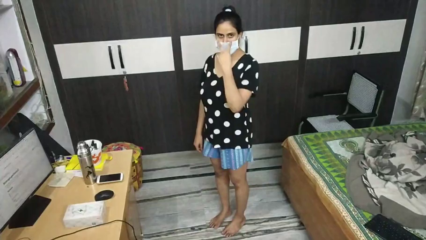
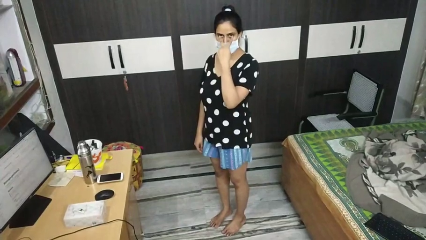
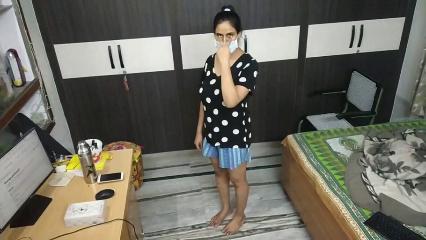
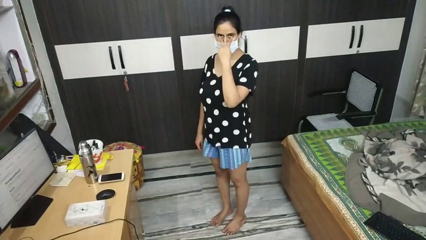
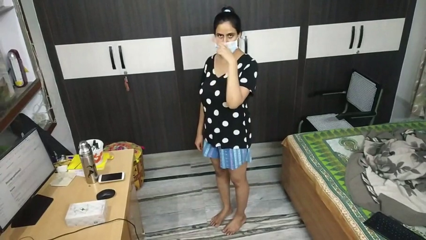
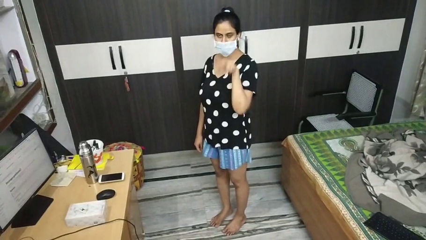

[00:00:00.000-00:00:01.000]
person gestures watch closely

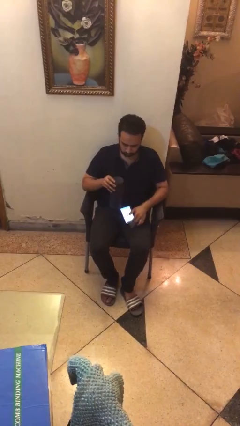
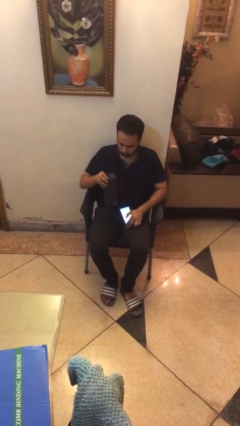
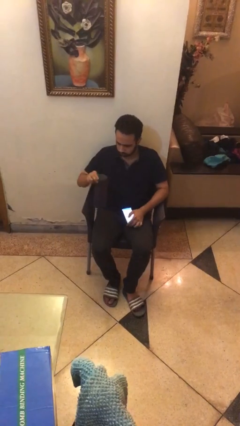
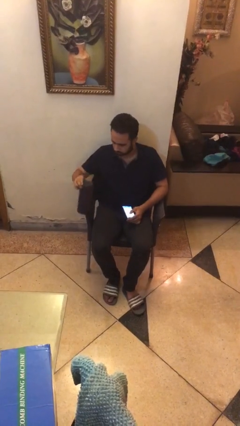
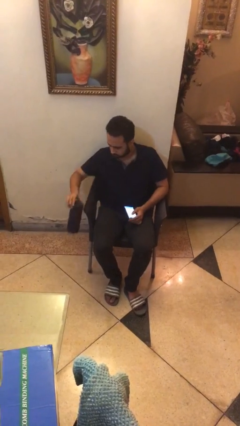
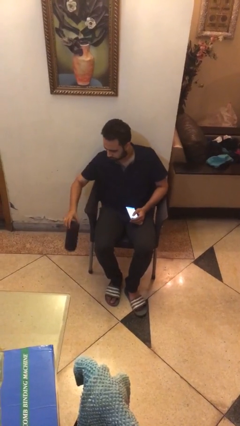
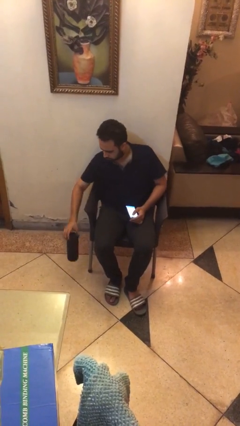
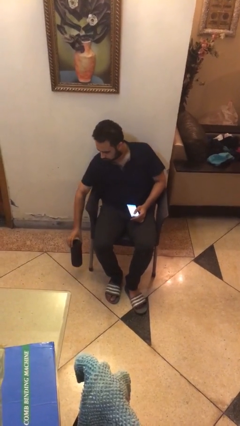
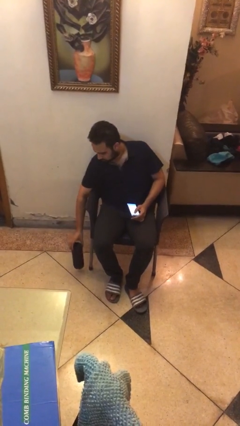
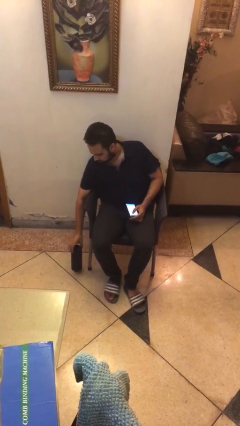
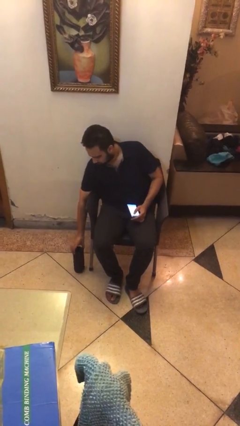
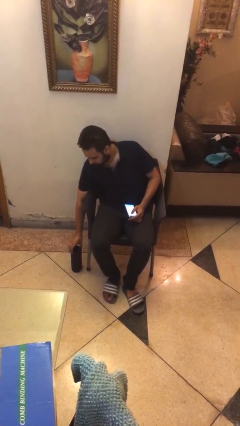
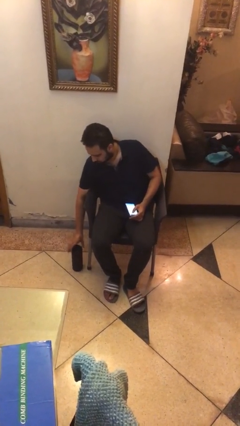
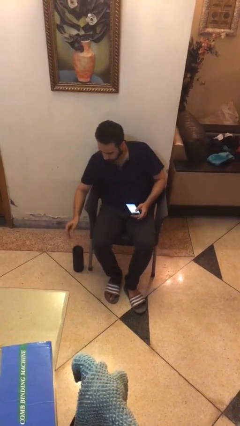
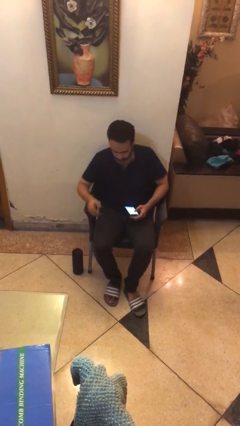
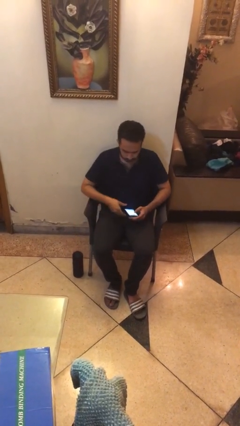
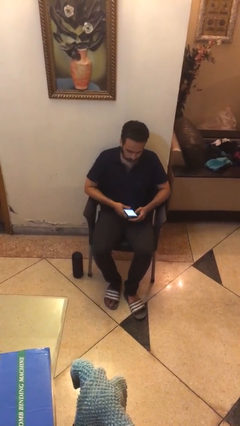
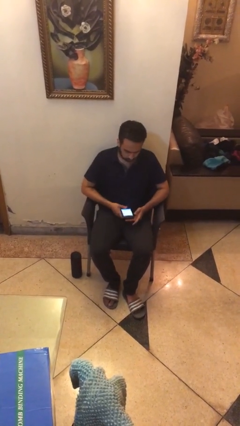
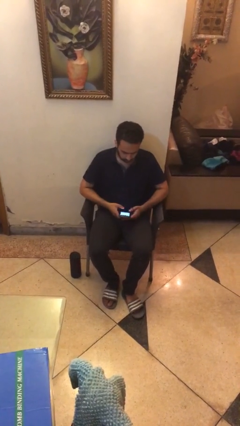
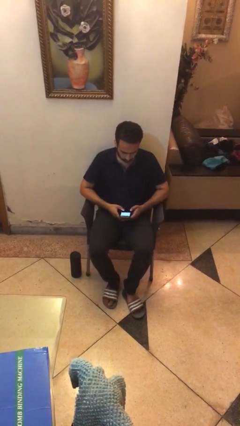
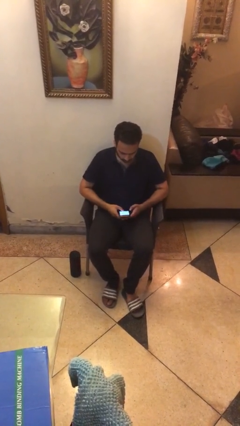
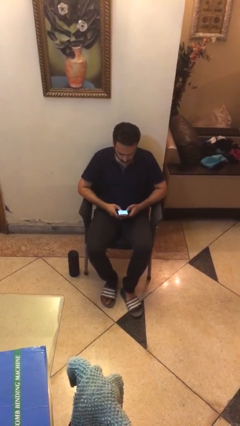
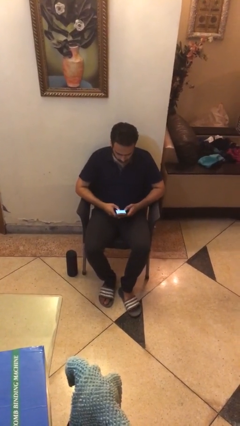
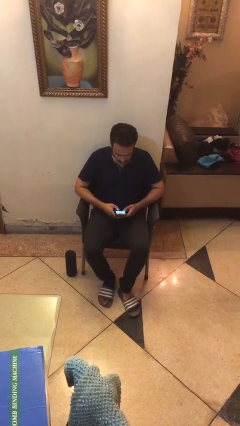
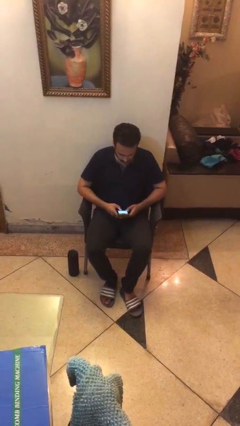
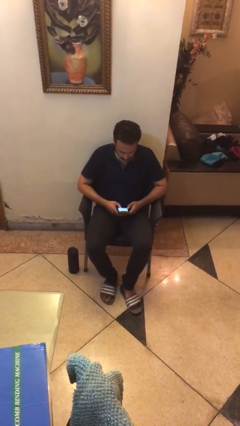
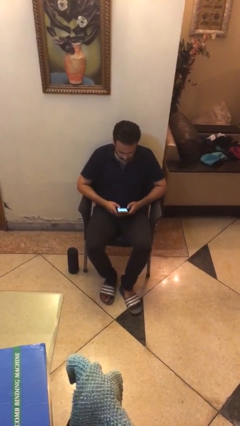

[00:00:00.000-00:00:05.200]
person puts down object on floor

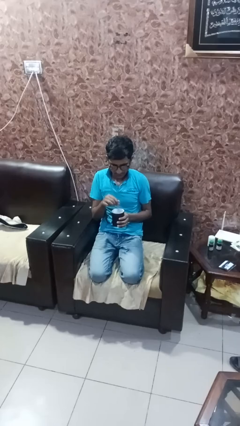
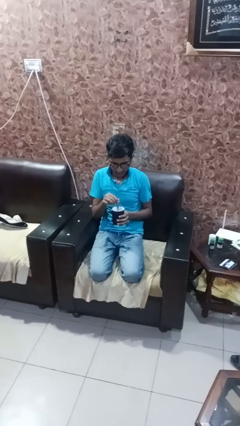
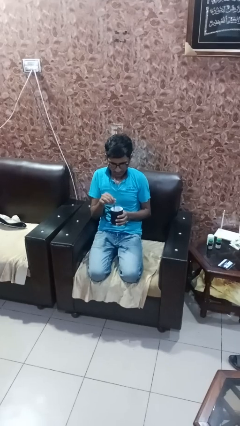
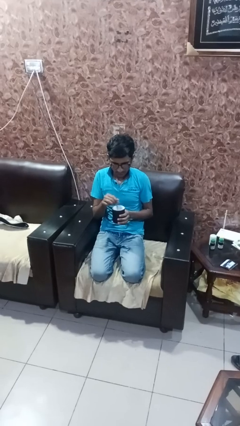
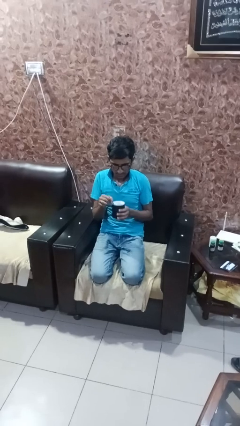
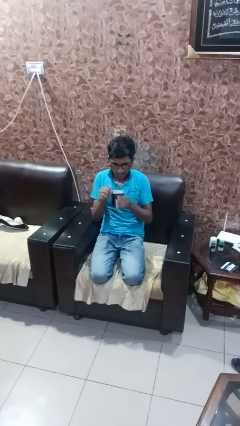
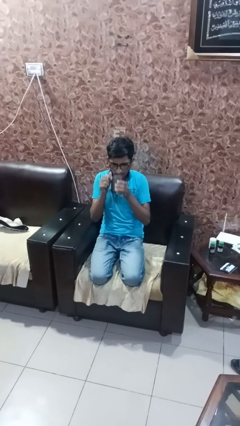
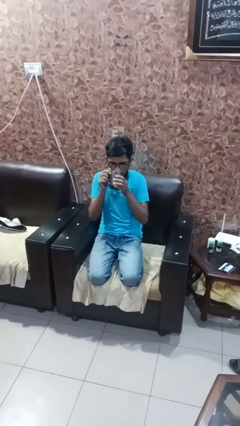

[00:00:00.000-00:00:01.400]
person stirs mug

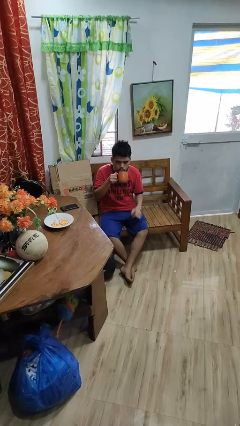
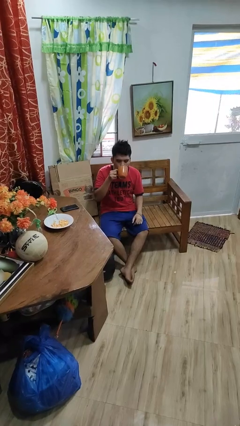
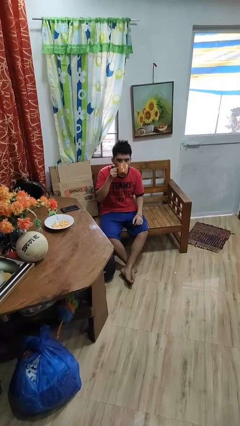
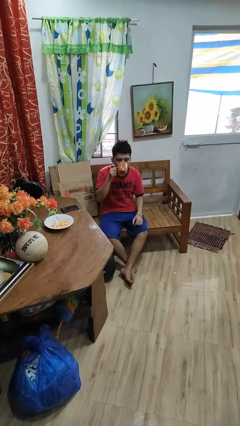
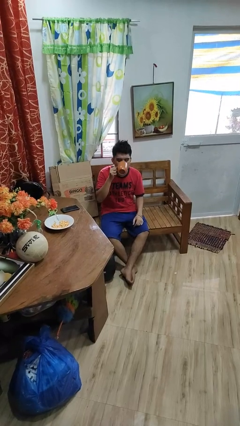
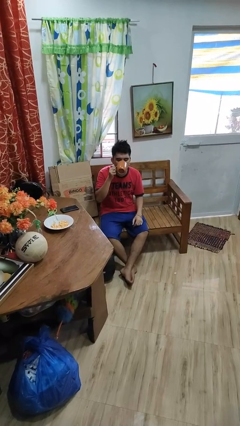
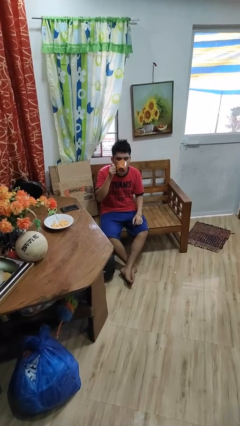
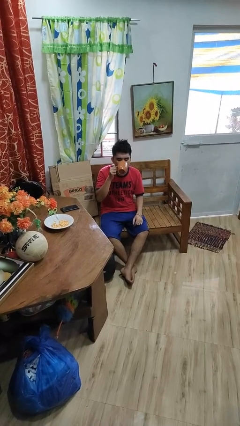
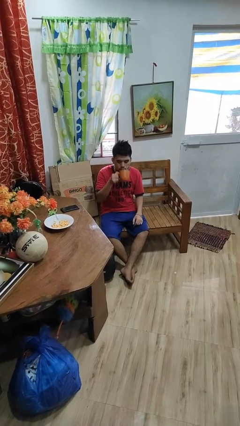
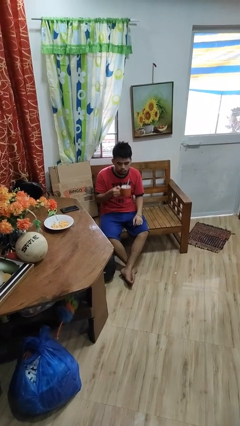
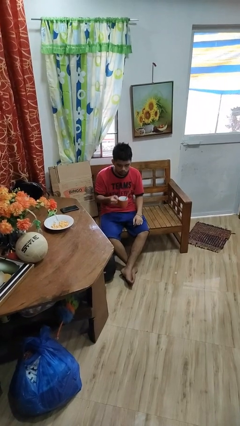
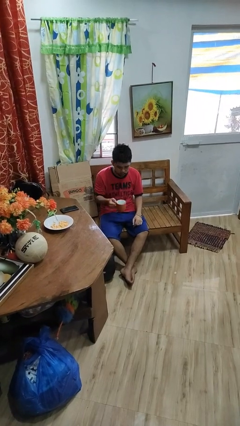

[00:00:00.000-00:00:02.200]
person drinks from mug

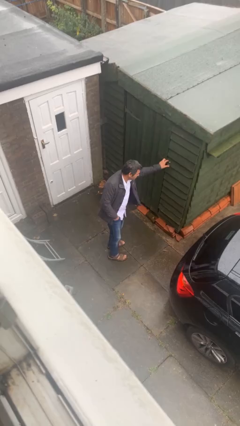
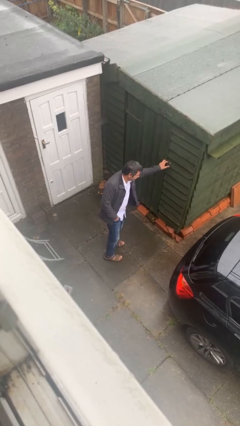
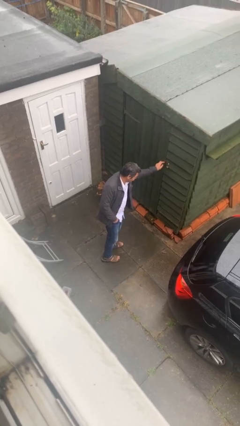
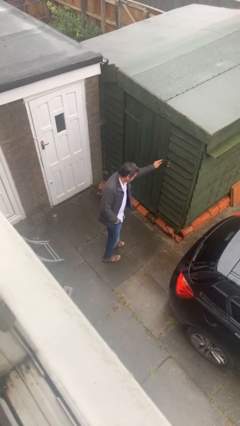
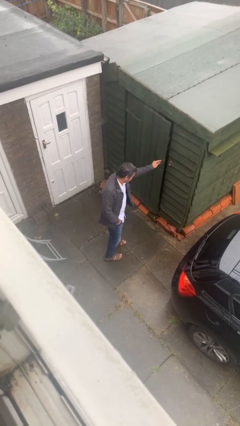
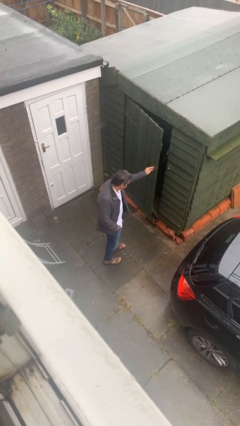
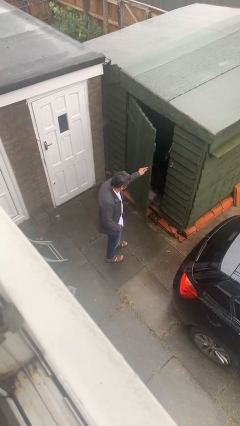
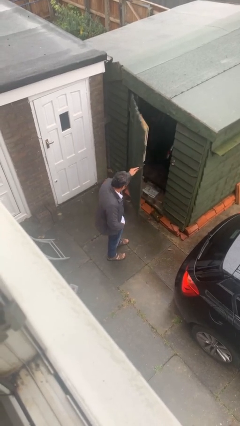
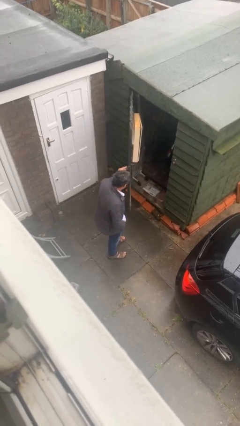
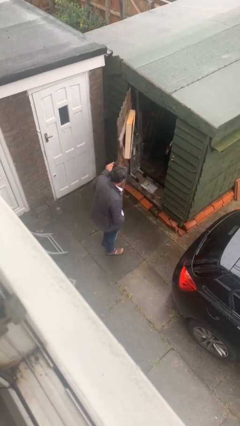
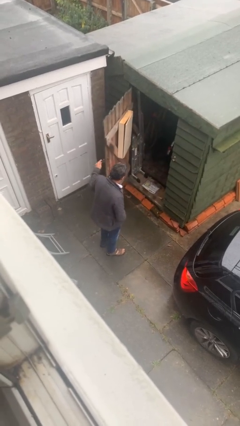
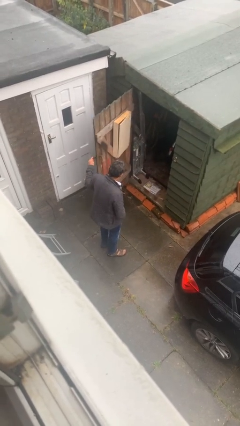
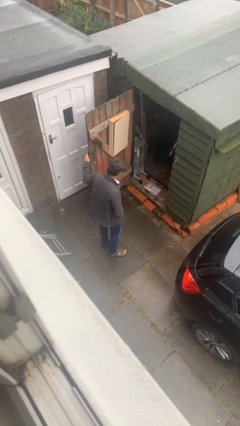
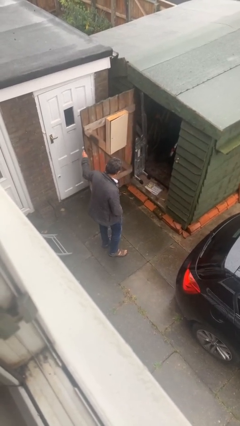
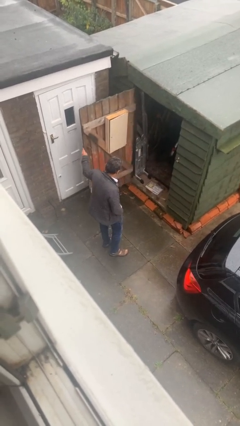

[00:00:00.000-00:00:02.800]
person opens facility door

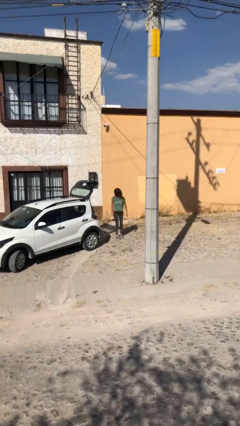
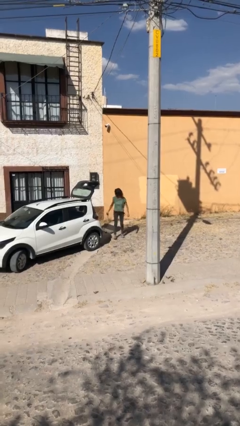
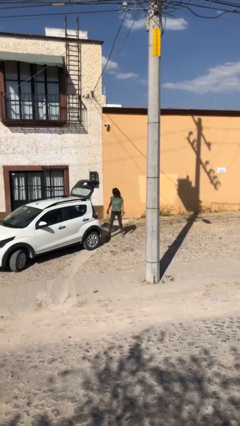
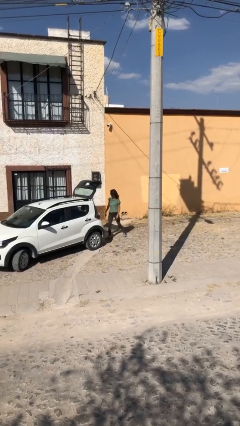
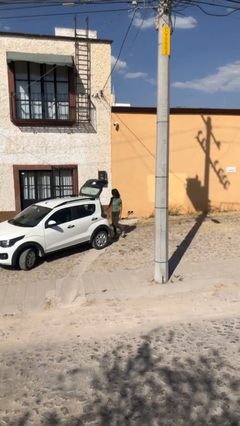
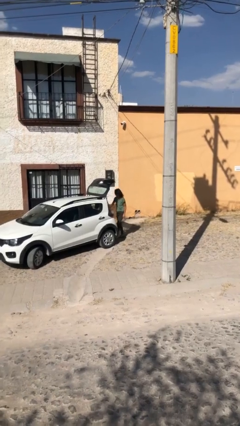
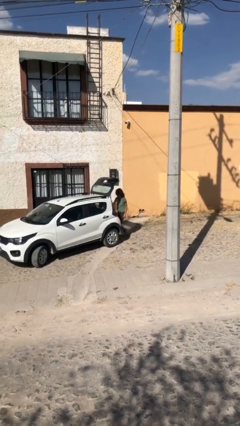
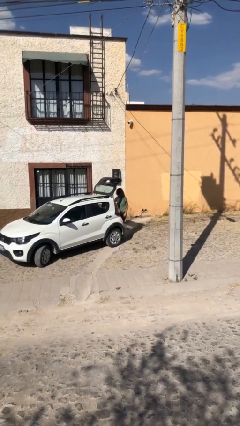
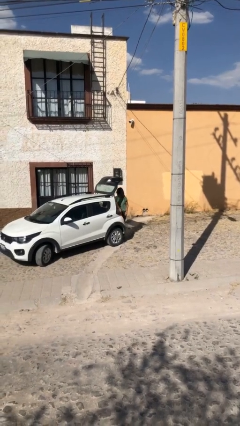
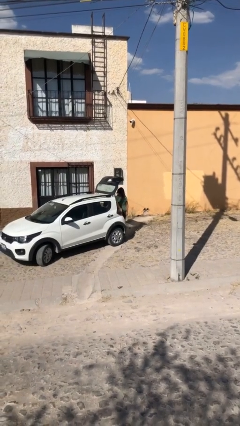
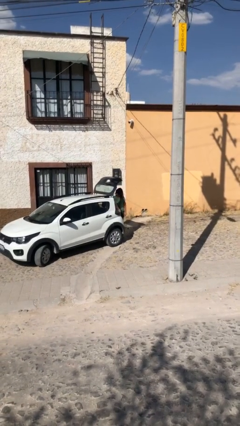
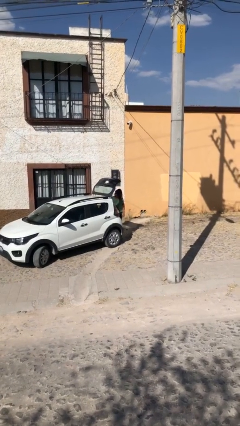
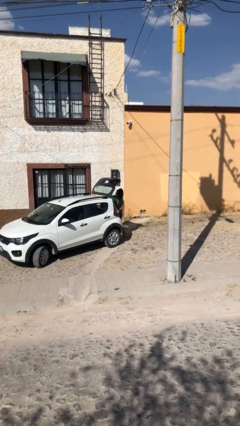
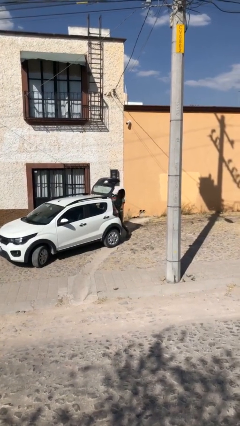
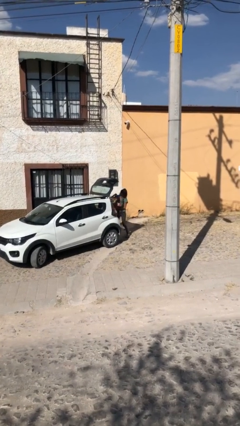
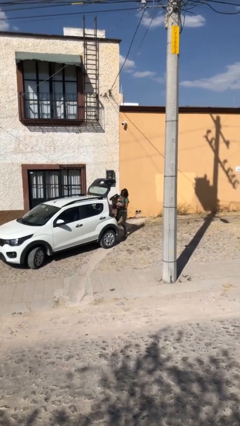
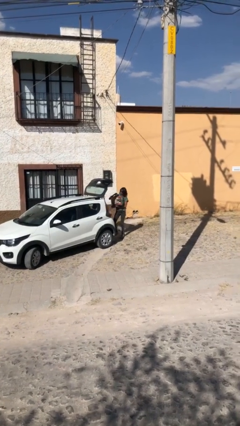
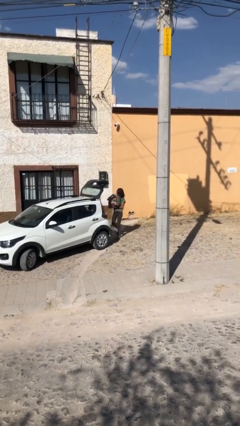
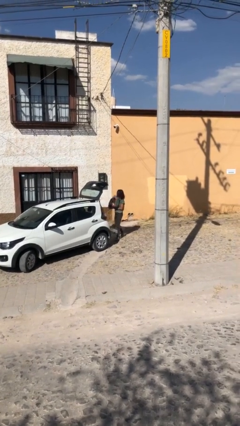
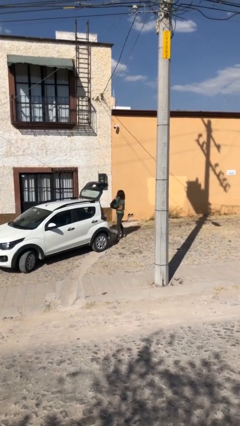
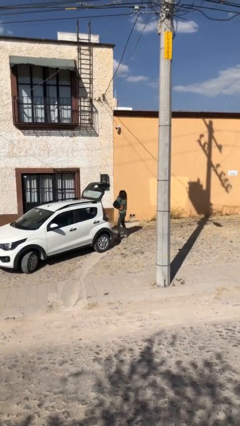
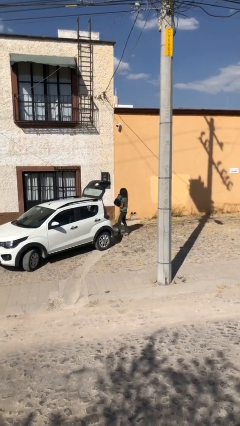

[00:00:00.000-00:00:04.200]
person unloads car

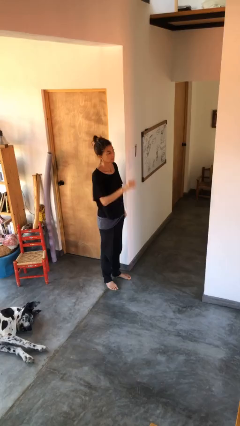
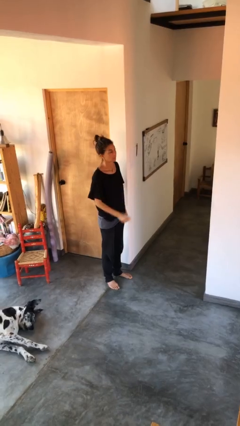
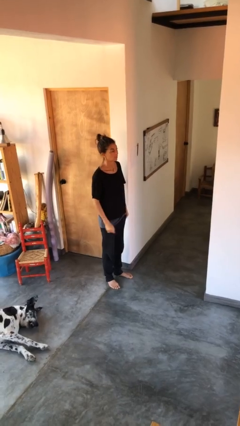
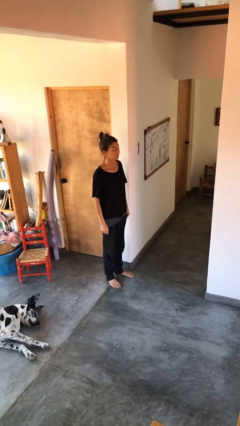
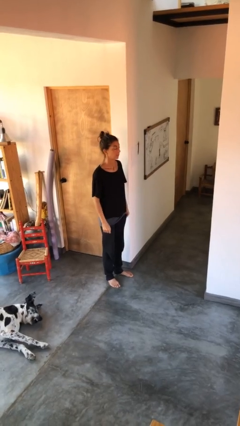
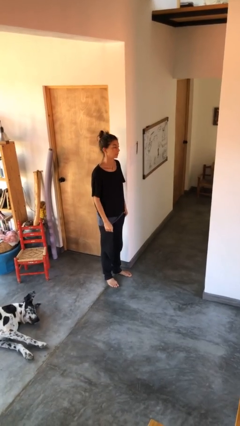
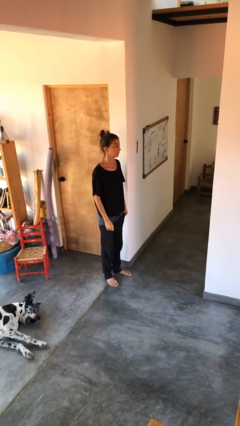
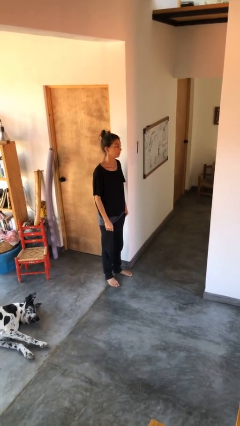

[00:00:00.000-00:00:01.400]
person gestures lower hand
